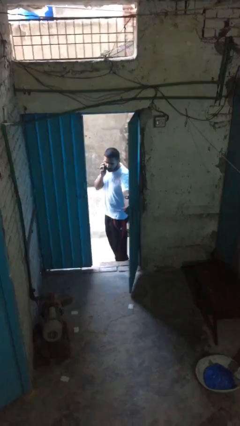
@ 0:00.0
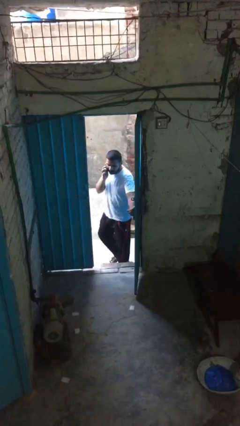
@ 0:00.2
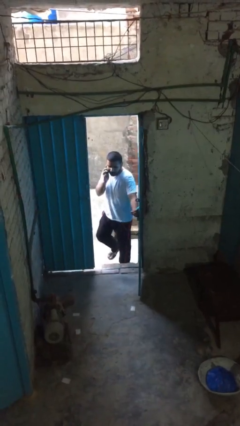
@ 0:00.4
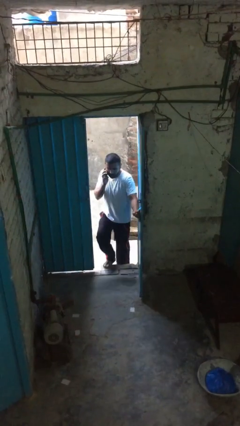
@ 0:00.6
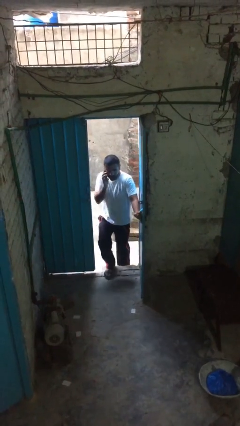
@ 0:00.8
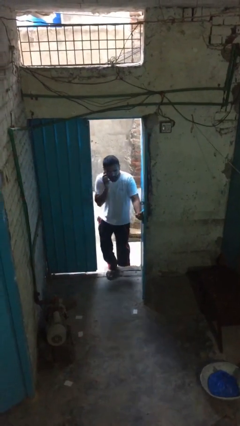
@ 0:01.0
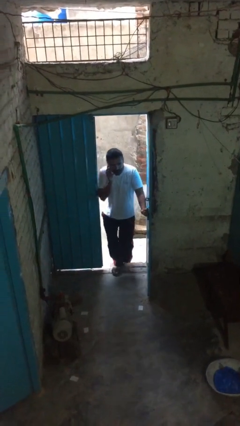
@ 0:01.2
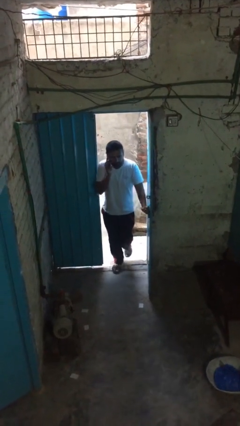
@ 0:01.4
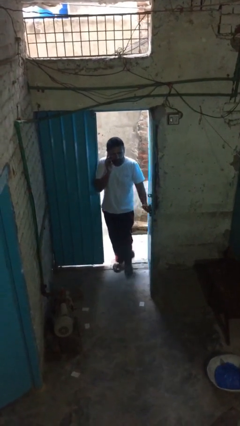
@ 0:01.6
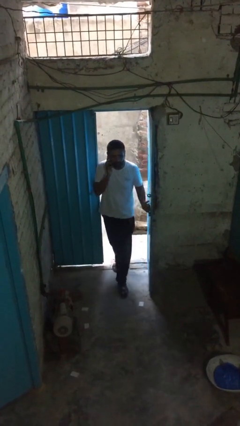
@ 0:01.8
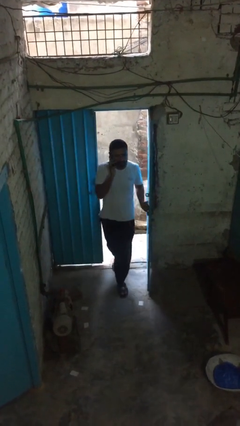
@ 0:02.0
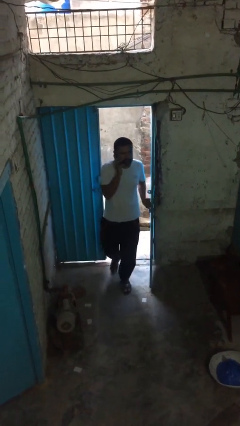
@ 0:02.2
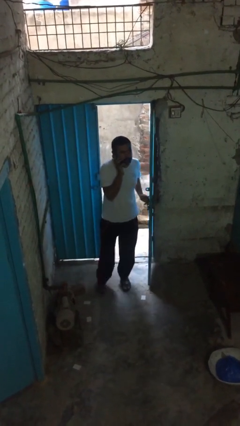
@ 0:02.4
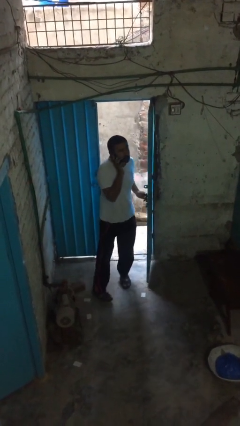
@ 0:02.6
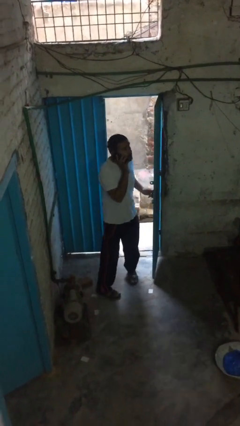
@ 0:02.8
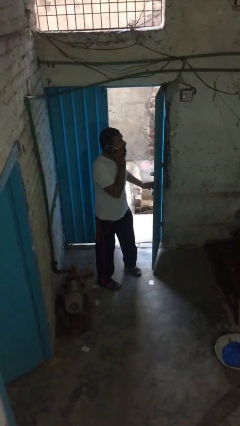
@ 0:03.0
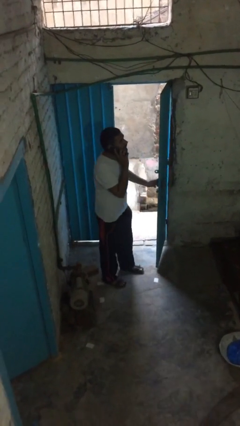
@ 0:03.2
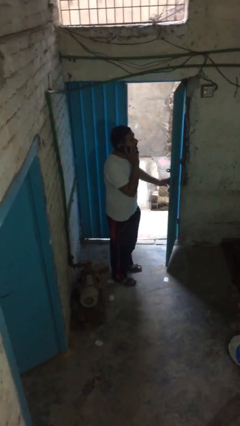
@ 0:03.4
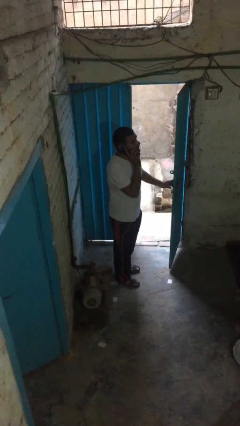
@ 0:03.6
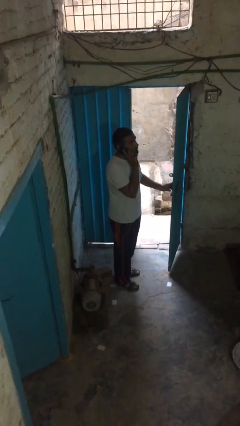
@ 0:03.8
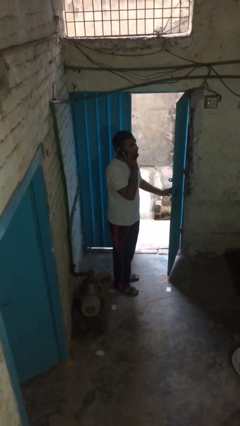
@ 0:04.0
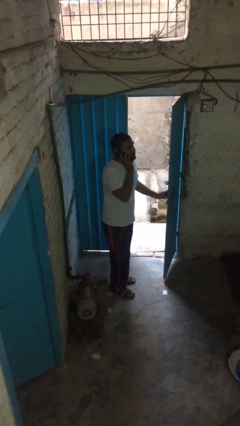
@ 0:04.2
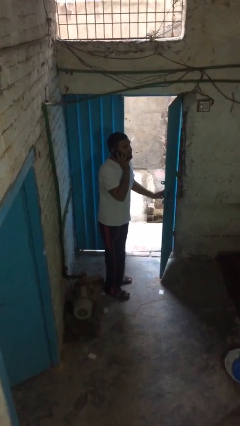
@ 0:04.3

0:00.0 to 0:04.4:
person enters scene through structure

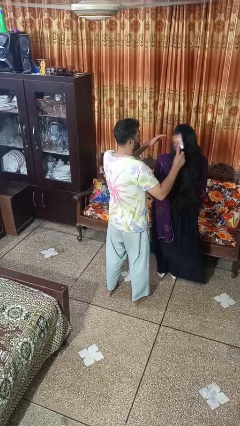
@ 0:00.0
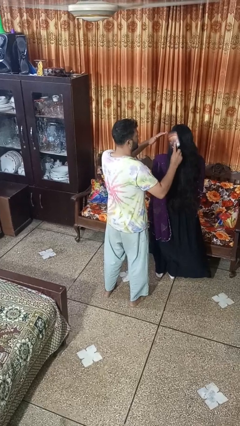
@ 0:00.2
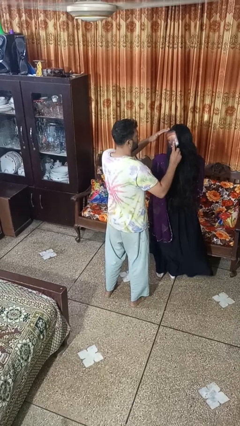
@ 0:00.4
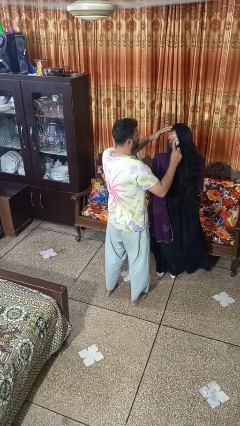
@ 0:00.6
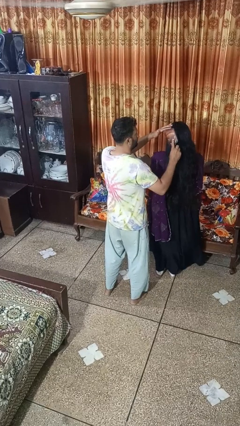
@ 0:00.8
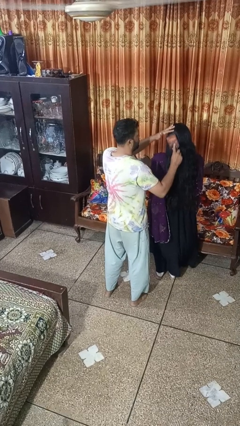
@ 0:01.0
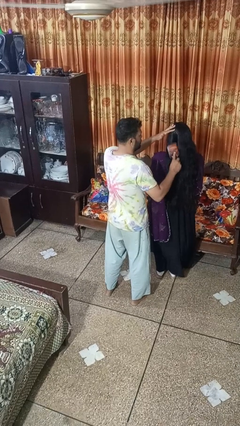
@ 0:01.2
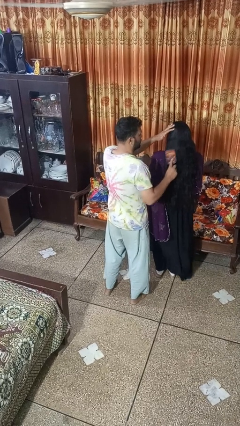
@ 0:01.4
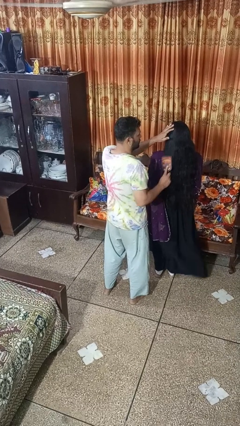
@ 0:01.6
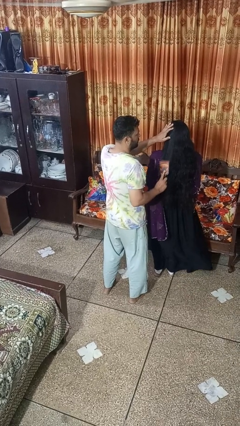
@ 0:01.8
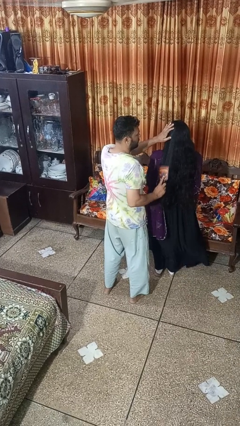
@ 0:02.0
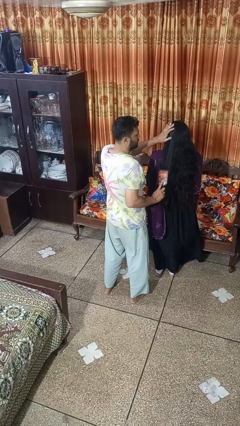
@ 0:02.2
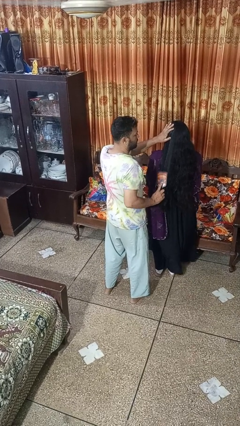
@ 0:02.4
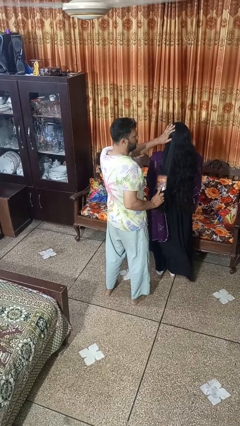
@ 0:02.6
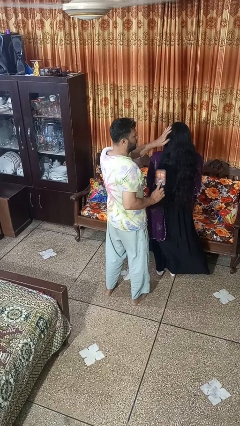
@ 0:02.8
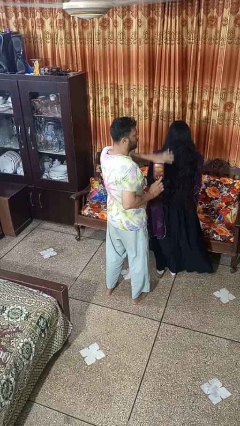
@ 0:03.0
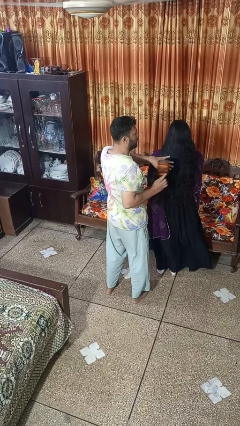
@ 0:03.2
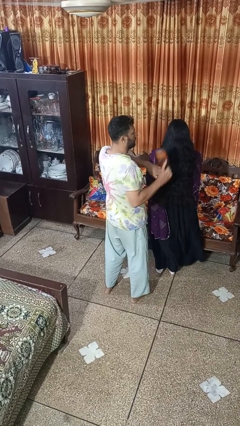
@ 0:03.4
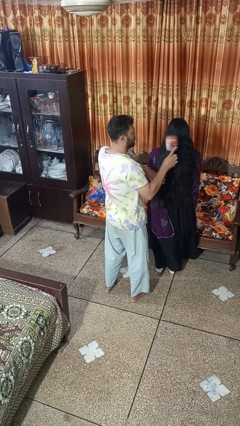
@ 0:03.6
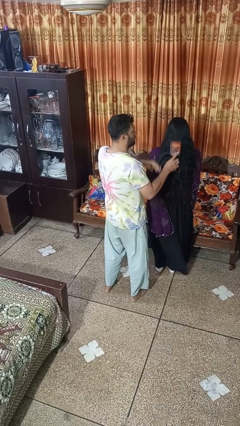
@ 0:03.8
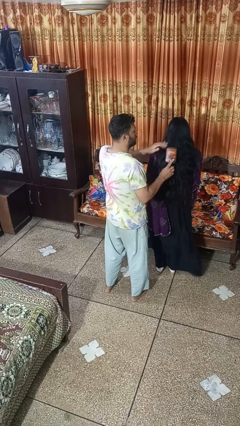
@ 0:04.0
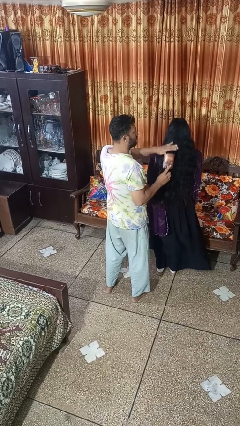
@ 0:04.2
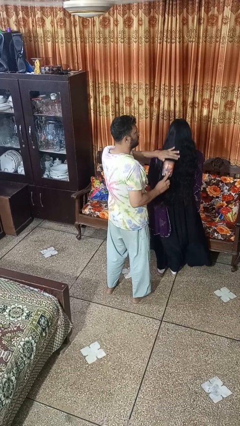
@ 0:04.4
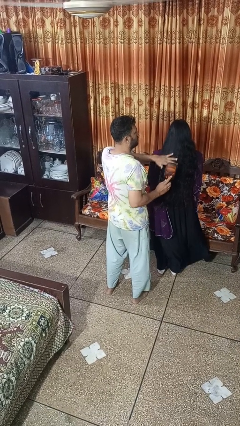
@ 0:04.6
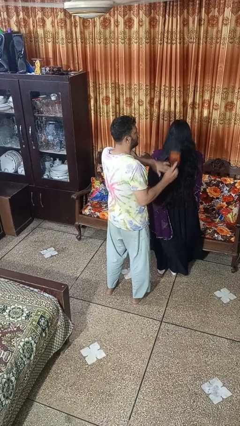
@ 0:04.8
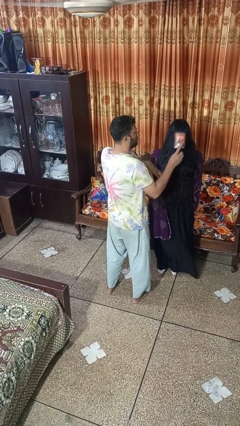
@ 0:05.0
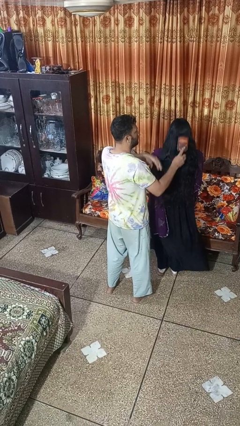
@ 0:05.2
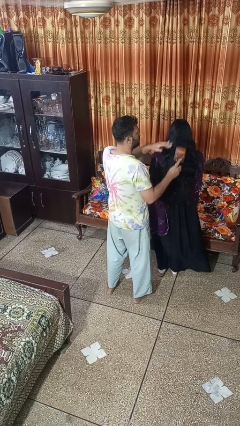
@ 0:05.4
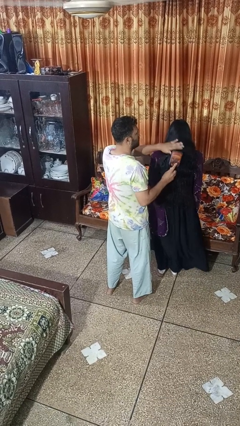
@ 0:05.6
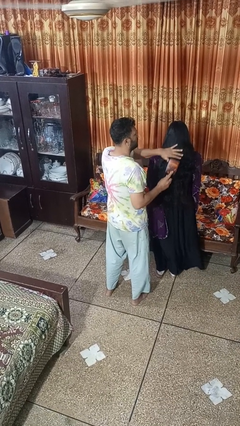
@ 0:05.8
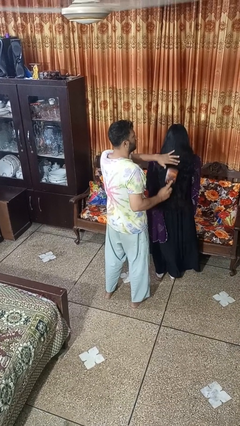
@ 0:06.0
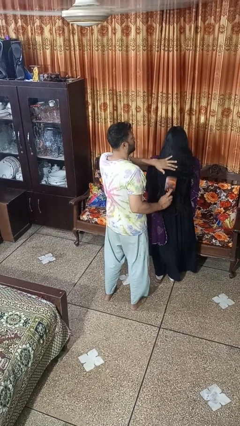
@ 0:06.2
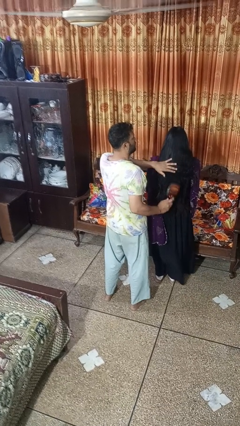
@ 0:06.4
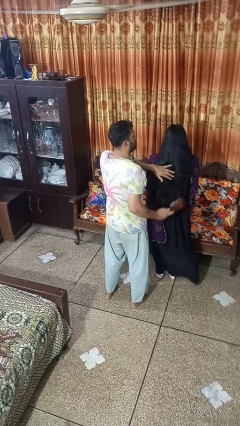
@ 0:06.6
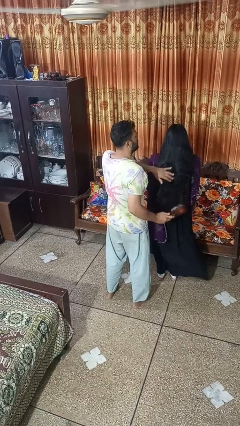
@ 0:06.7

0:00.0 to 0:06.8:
person brushes hair of person

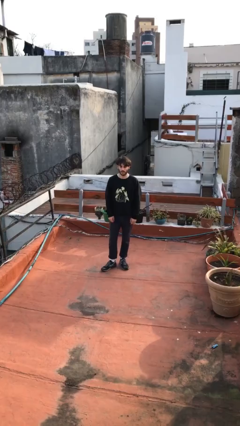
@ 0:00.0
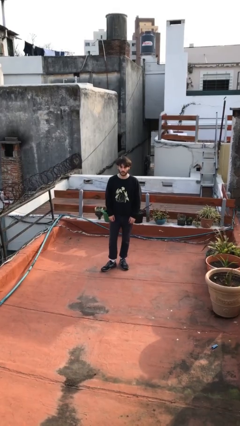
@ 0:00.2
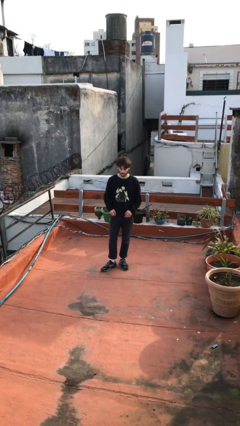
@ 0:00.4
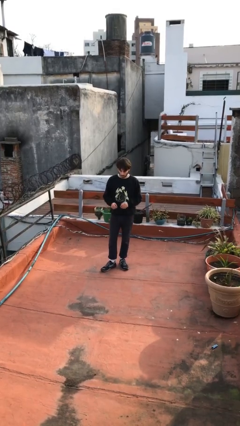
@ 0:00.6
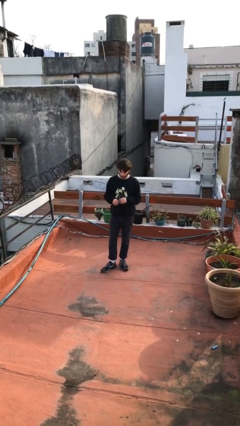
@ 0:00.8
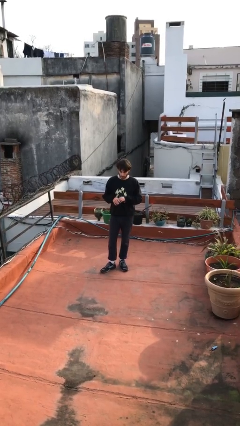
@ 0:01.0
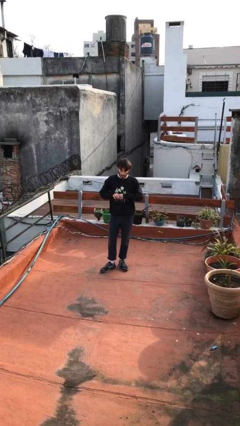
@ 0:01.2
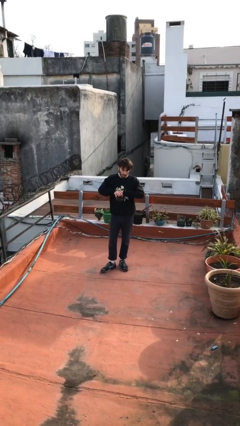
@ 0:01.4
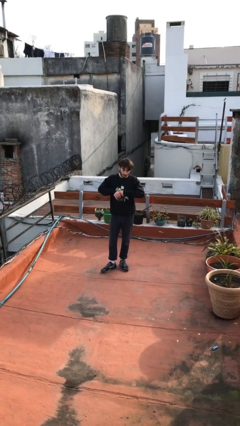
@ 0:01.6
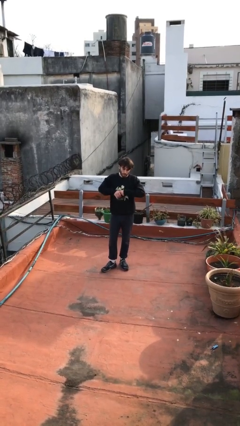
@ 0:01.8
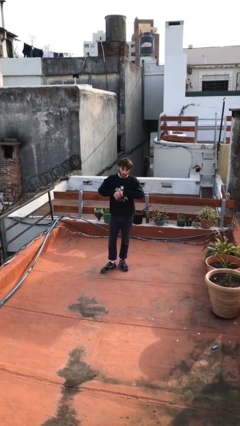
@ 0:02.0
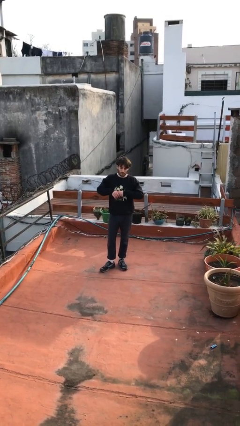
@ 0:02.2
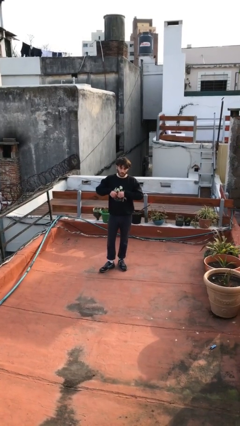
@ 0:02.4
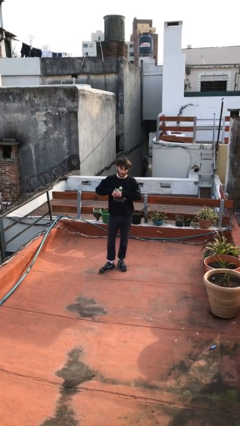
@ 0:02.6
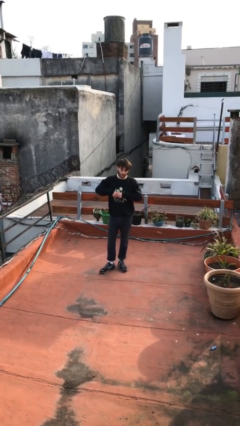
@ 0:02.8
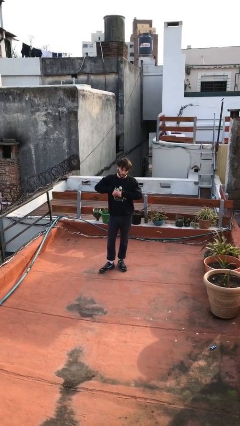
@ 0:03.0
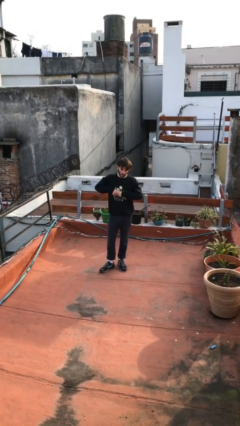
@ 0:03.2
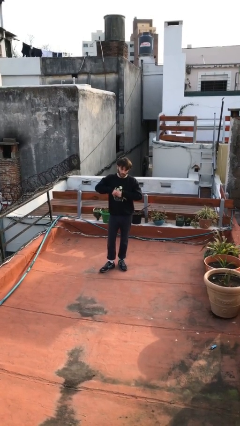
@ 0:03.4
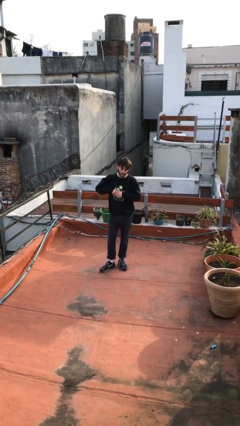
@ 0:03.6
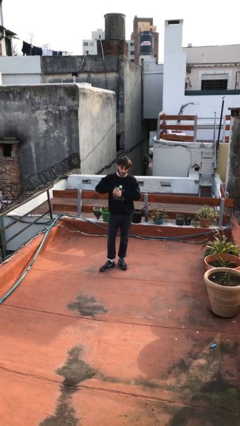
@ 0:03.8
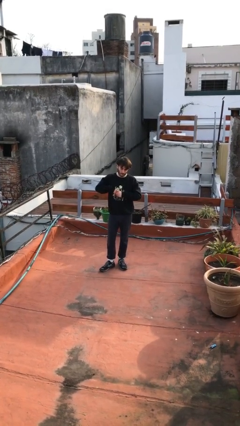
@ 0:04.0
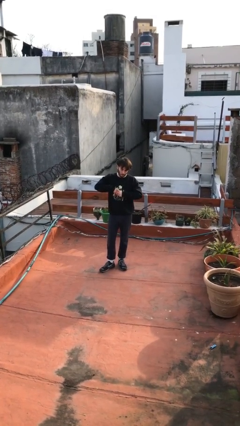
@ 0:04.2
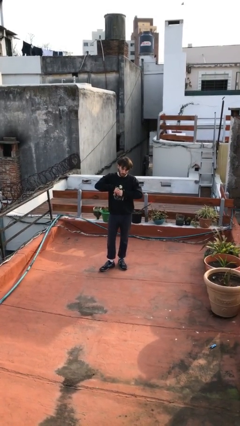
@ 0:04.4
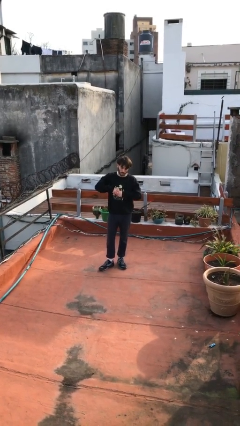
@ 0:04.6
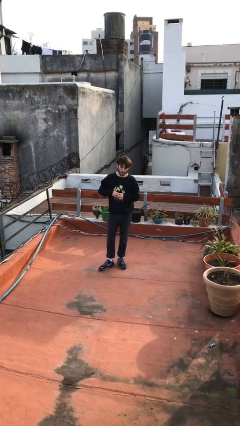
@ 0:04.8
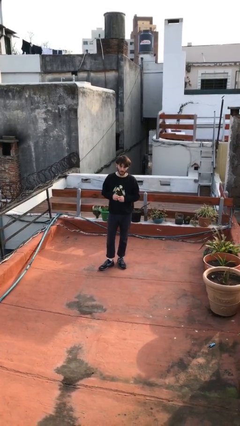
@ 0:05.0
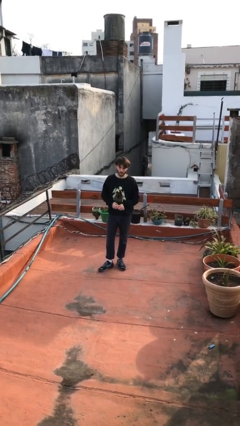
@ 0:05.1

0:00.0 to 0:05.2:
person cracks knuckles

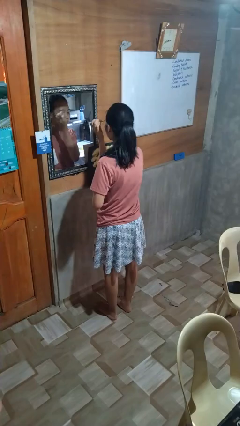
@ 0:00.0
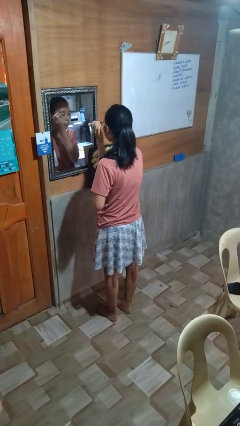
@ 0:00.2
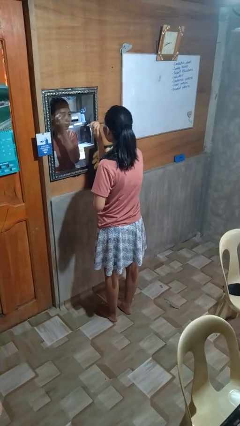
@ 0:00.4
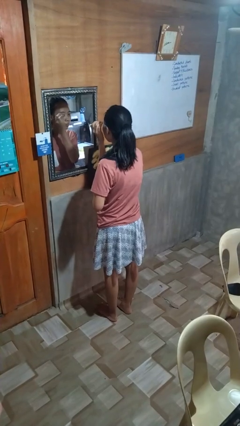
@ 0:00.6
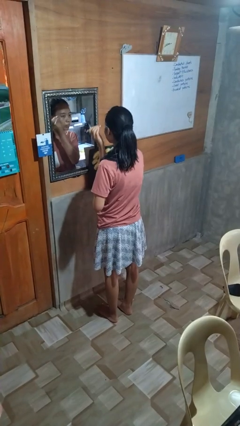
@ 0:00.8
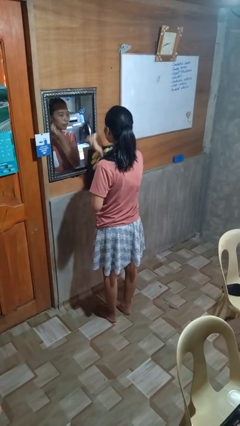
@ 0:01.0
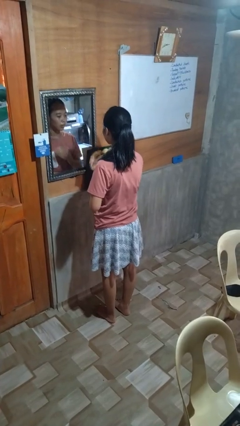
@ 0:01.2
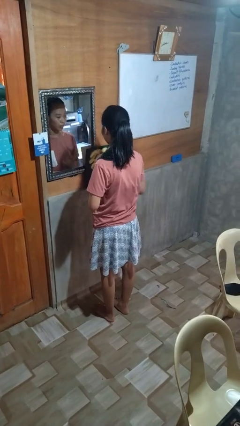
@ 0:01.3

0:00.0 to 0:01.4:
person applies eye makeup
